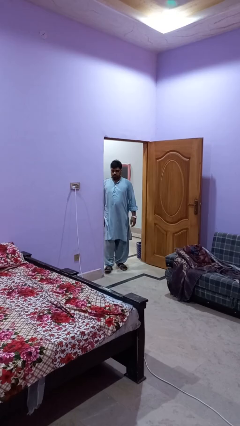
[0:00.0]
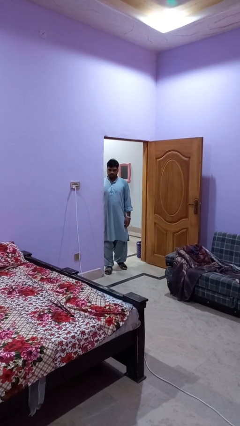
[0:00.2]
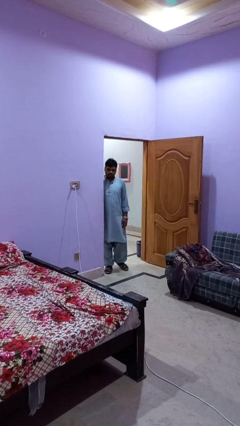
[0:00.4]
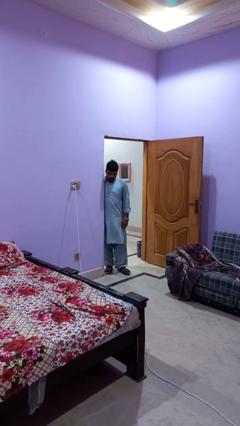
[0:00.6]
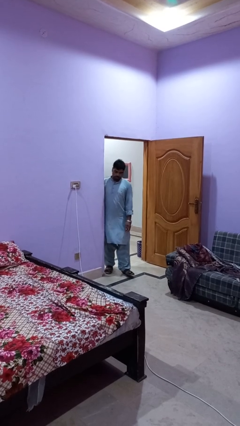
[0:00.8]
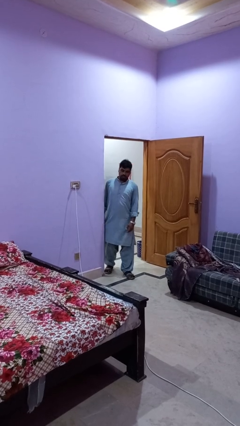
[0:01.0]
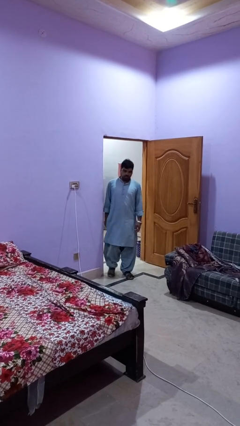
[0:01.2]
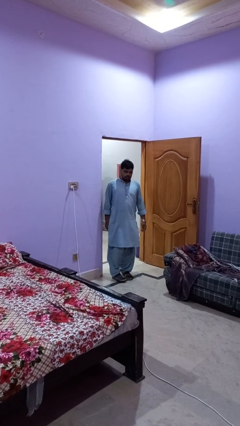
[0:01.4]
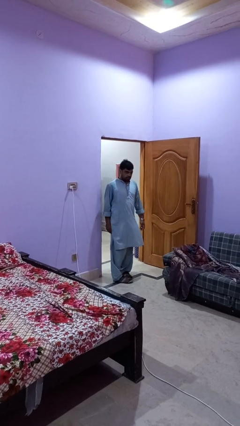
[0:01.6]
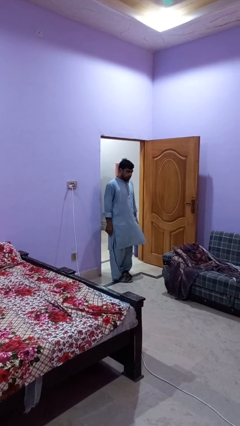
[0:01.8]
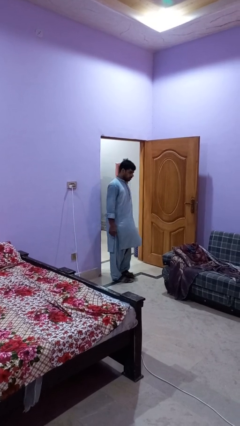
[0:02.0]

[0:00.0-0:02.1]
person bumps into wall

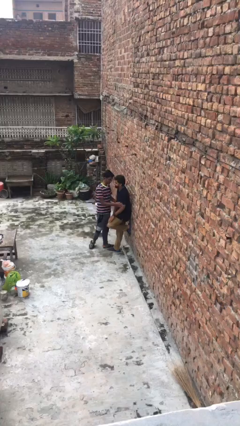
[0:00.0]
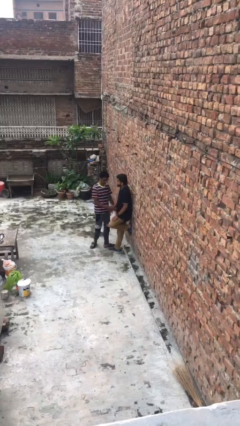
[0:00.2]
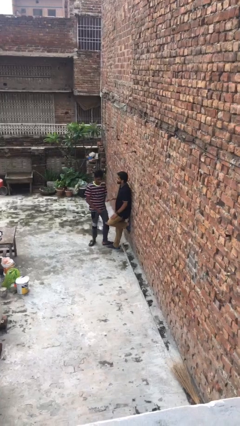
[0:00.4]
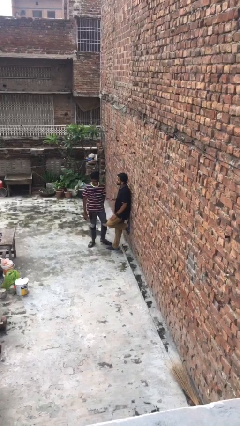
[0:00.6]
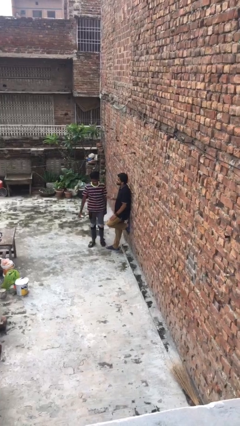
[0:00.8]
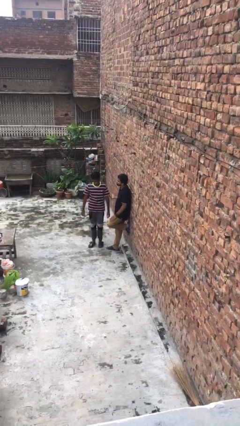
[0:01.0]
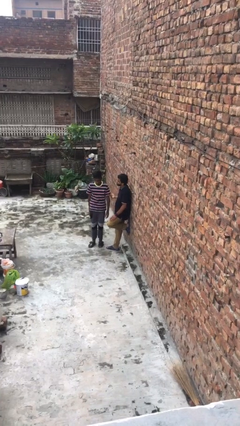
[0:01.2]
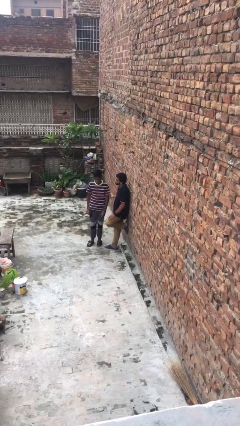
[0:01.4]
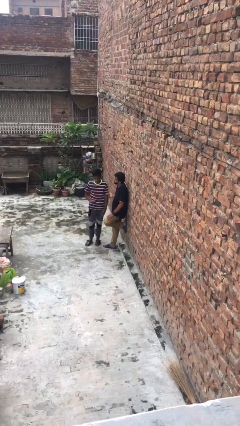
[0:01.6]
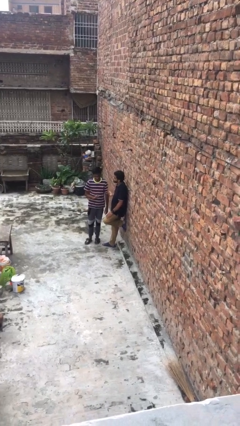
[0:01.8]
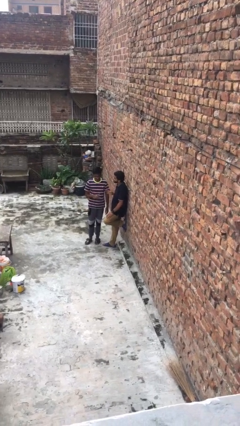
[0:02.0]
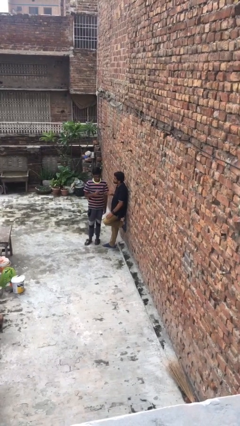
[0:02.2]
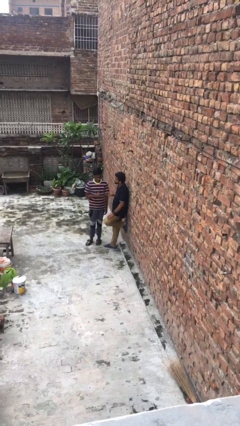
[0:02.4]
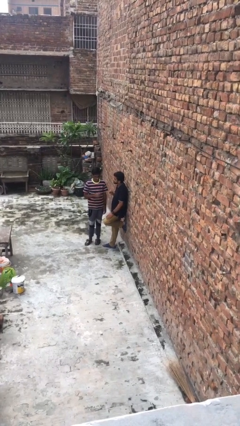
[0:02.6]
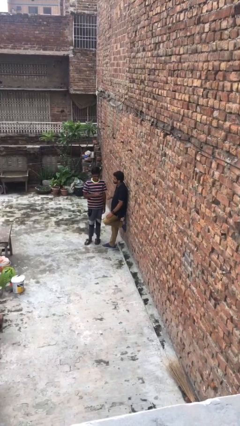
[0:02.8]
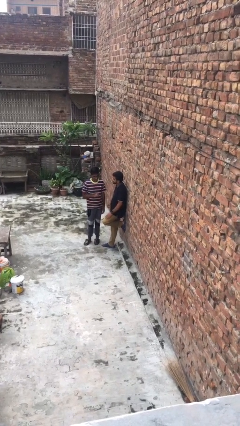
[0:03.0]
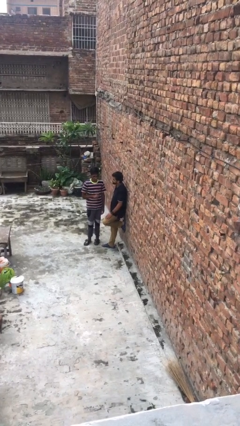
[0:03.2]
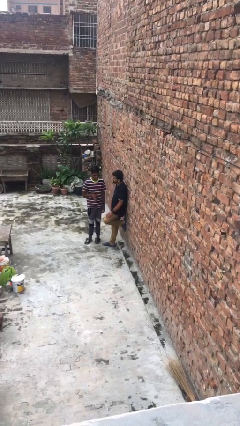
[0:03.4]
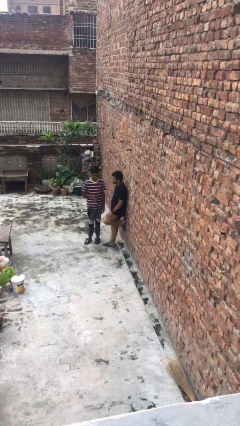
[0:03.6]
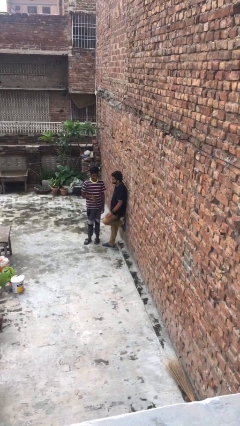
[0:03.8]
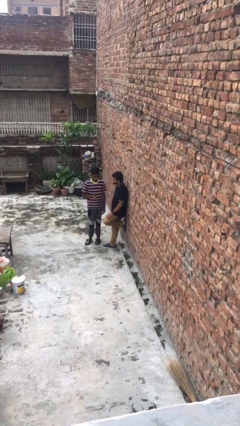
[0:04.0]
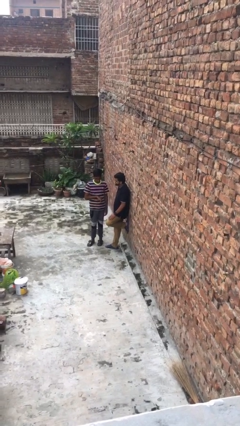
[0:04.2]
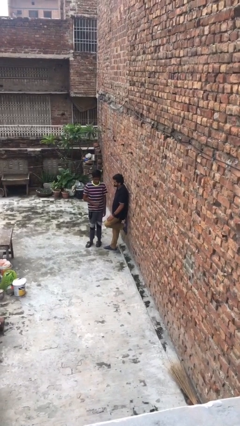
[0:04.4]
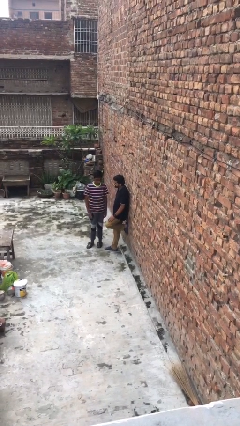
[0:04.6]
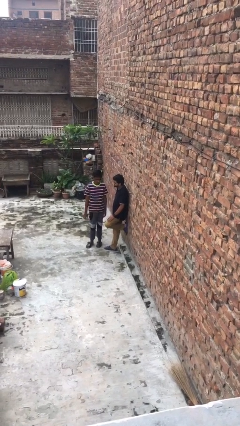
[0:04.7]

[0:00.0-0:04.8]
person talks to person

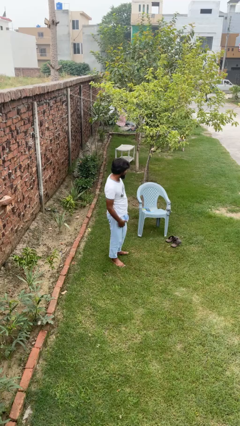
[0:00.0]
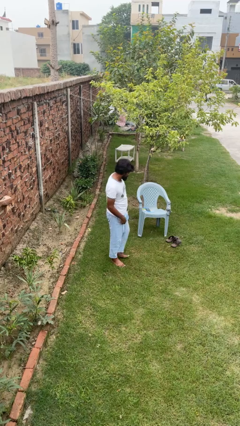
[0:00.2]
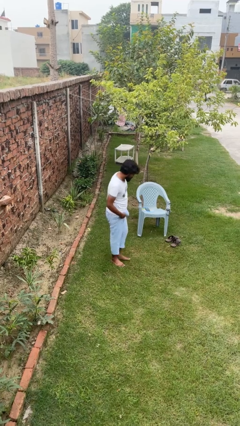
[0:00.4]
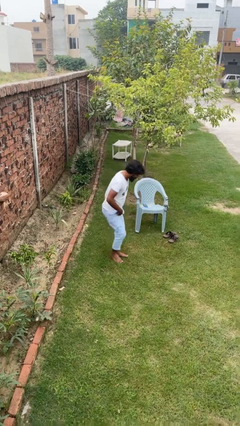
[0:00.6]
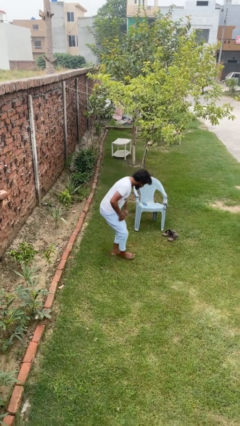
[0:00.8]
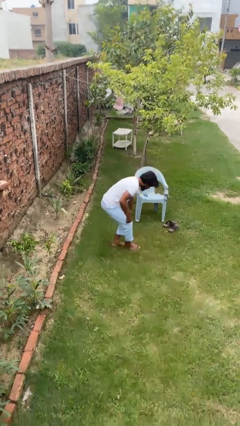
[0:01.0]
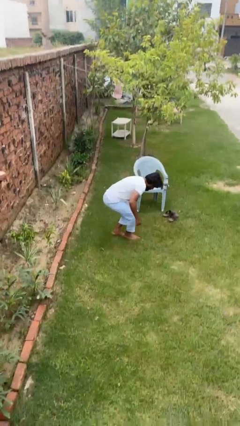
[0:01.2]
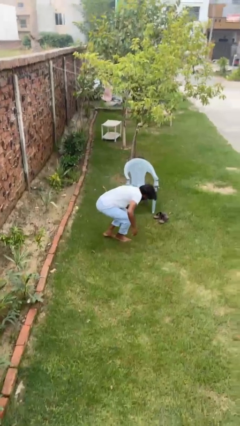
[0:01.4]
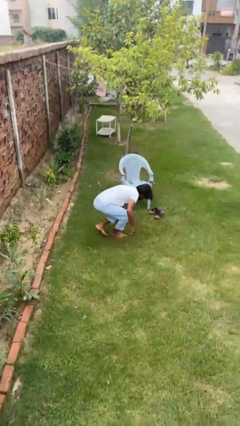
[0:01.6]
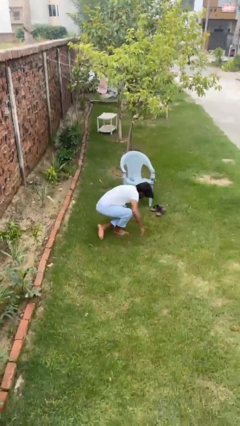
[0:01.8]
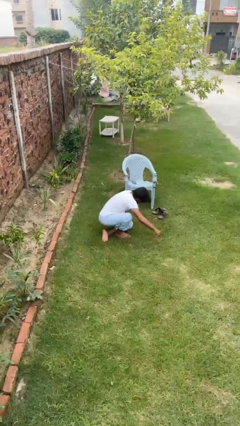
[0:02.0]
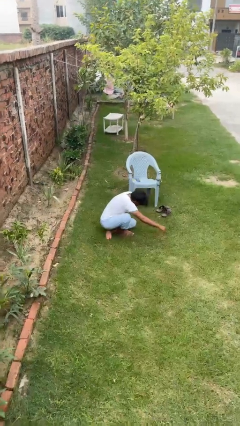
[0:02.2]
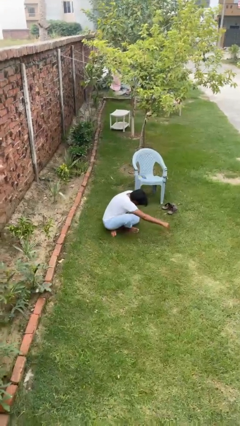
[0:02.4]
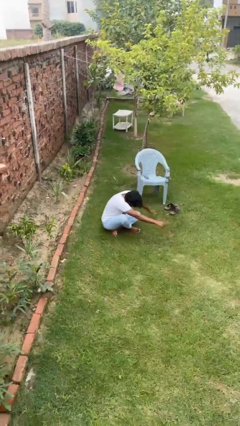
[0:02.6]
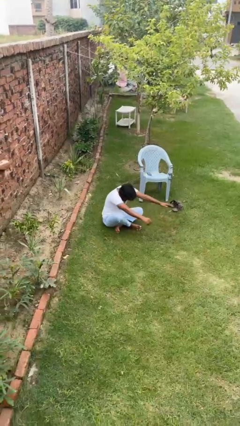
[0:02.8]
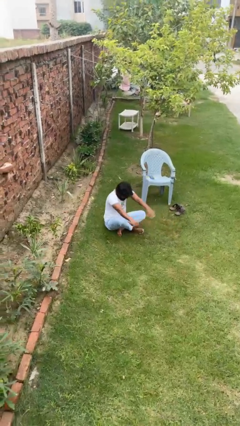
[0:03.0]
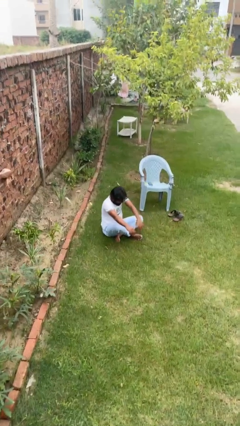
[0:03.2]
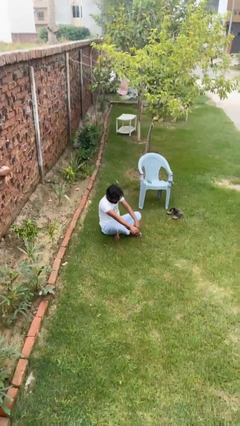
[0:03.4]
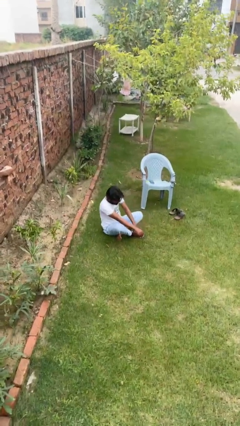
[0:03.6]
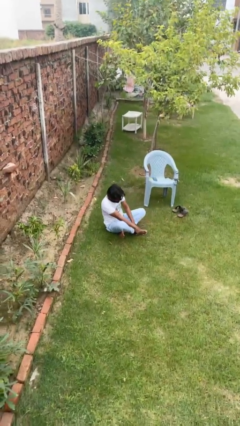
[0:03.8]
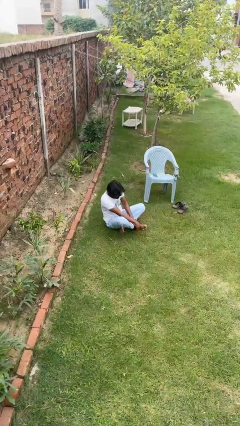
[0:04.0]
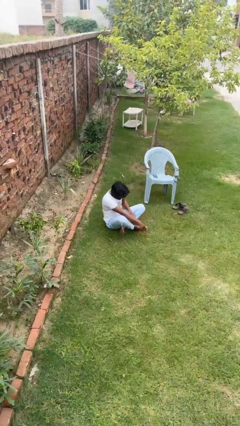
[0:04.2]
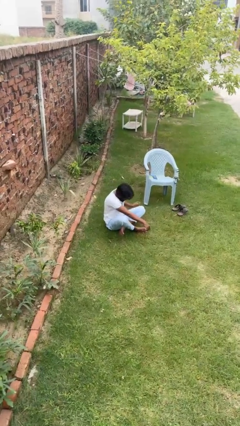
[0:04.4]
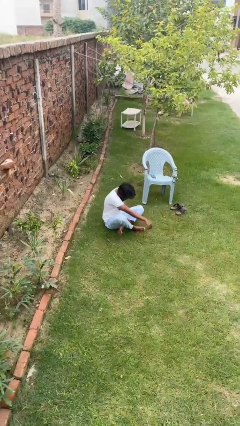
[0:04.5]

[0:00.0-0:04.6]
person sits crisscross

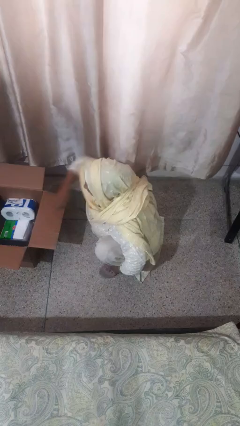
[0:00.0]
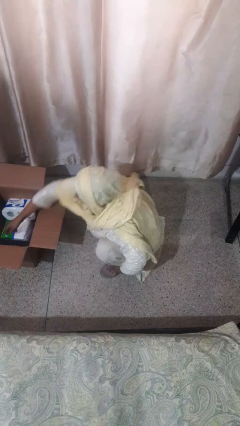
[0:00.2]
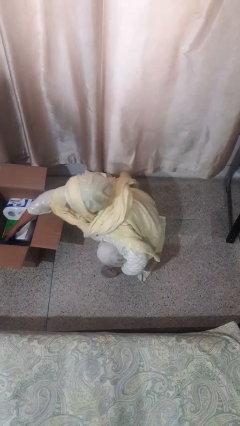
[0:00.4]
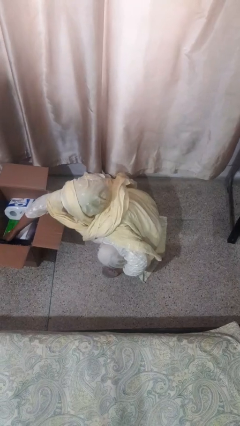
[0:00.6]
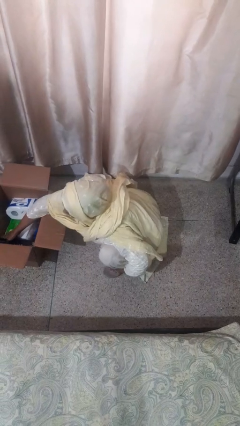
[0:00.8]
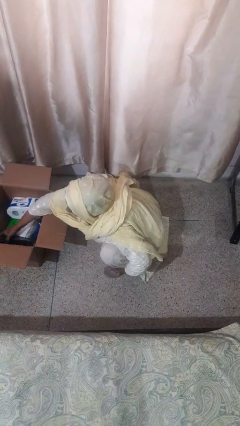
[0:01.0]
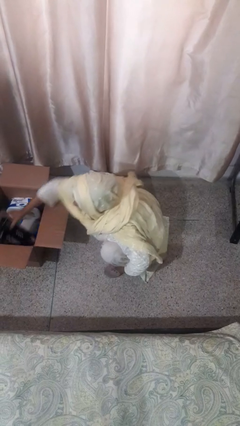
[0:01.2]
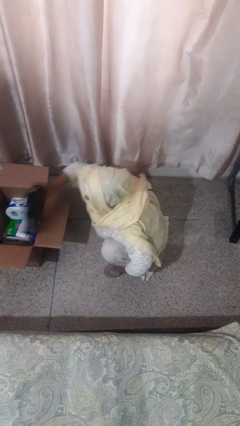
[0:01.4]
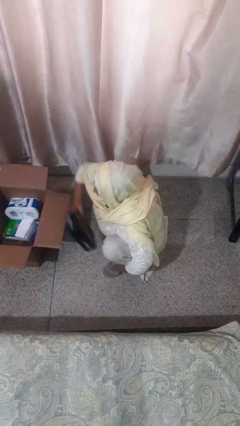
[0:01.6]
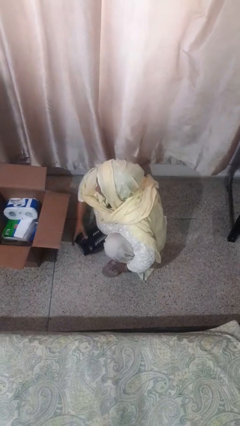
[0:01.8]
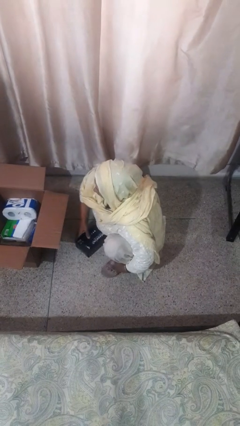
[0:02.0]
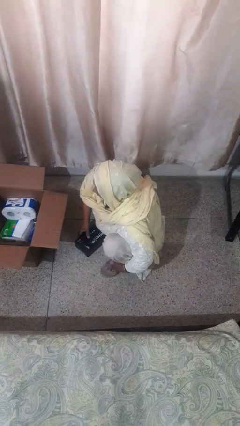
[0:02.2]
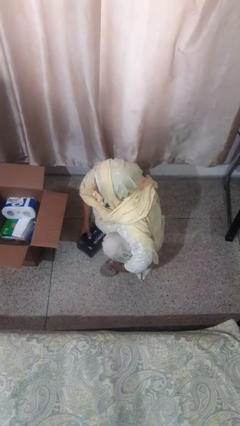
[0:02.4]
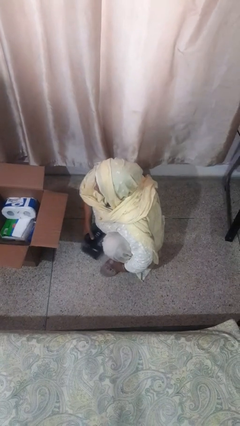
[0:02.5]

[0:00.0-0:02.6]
person takes object from box

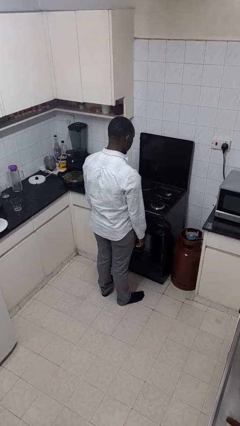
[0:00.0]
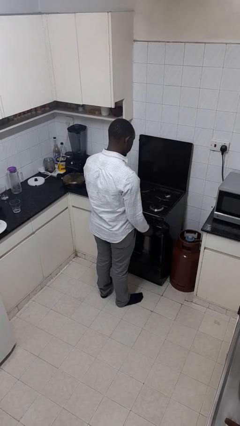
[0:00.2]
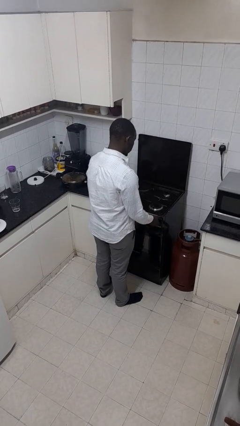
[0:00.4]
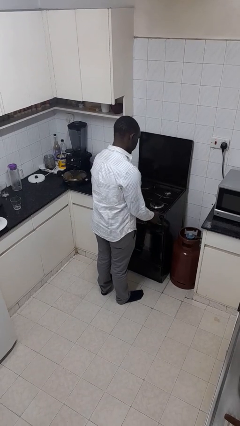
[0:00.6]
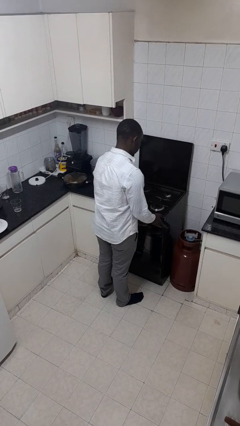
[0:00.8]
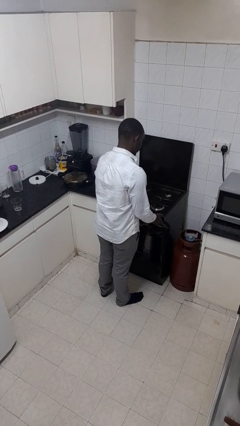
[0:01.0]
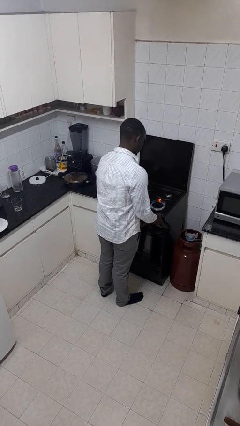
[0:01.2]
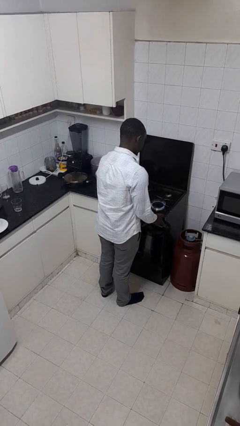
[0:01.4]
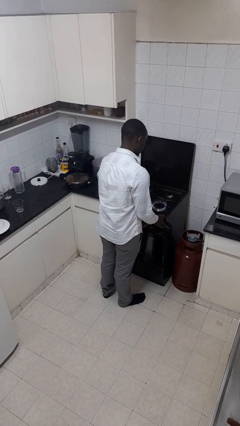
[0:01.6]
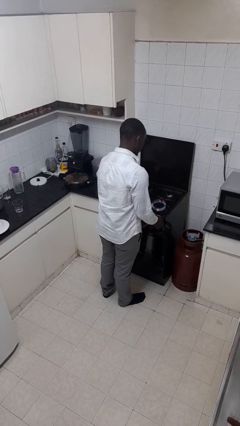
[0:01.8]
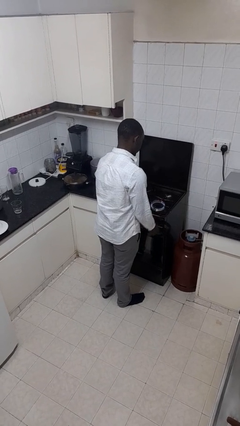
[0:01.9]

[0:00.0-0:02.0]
person turns on stovetop

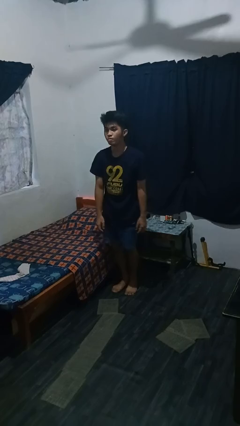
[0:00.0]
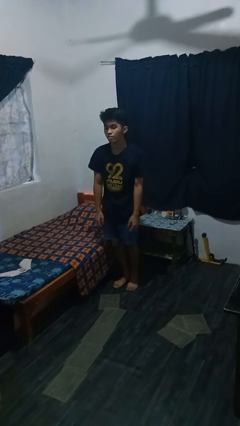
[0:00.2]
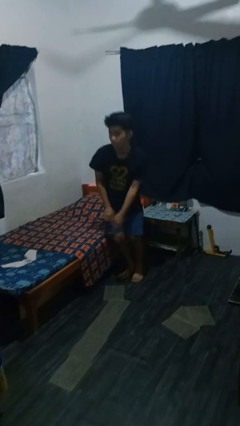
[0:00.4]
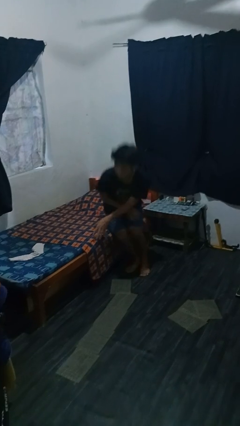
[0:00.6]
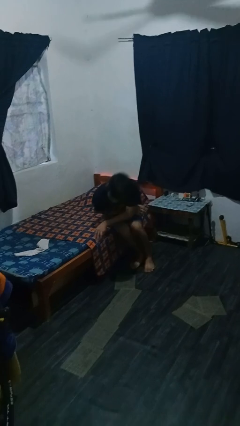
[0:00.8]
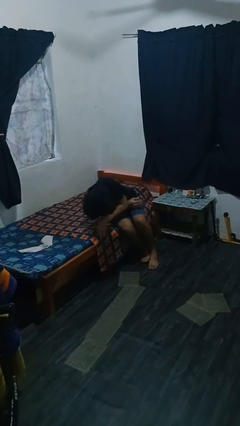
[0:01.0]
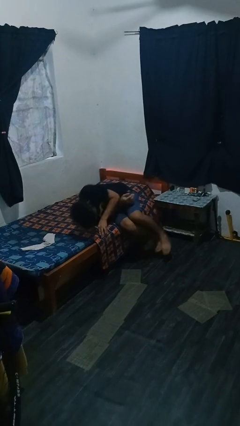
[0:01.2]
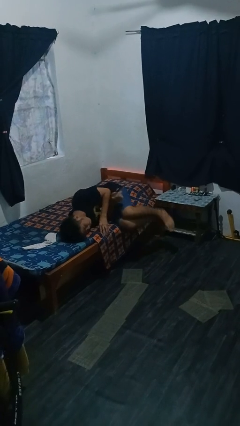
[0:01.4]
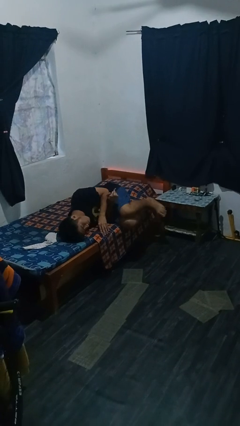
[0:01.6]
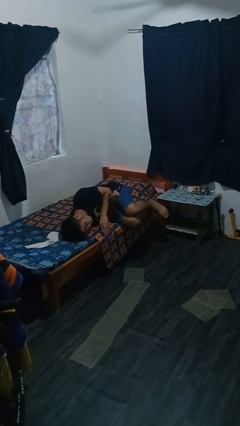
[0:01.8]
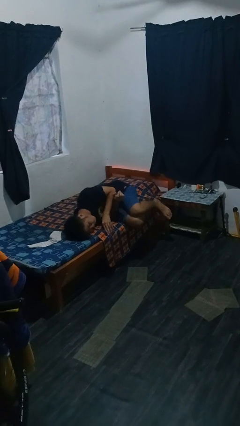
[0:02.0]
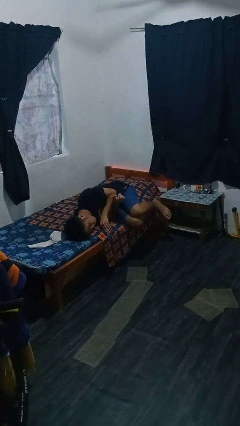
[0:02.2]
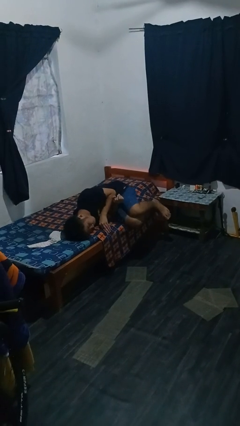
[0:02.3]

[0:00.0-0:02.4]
person lies down on bed
